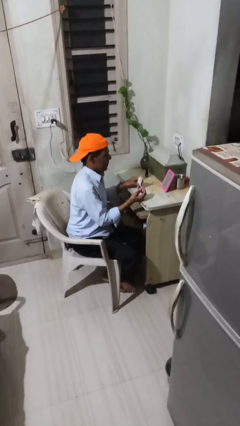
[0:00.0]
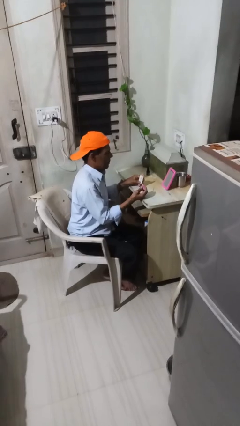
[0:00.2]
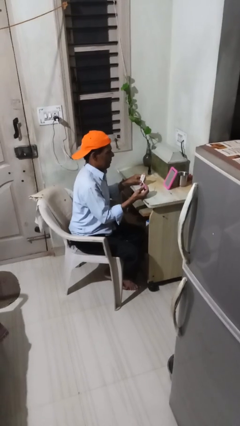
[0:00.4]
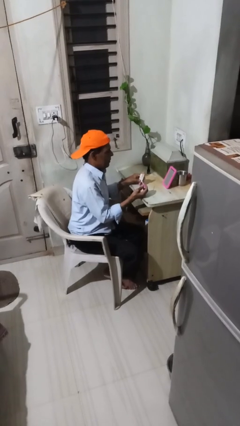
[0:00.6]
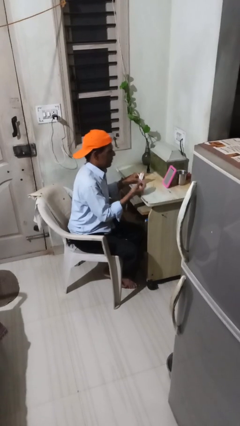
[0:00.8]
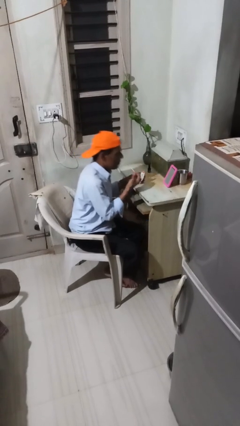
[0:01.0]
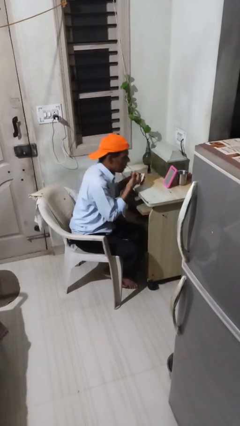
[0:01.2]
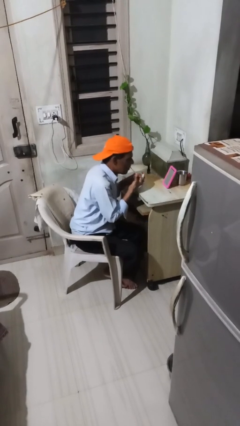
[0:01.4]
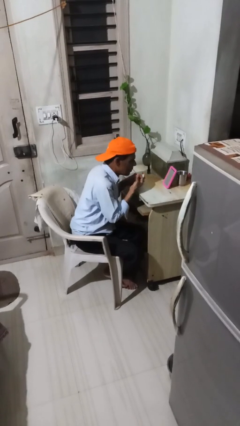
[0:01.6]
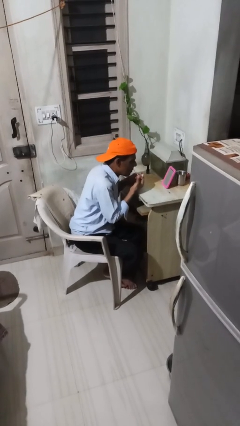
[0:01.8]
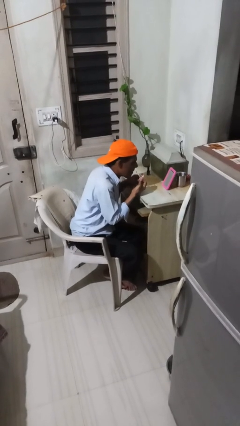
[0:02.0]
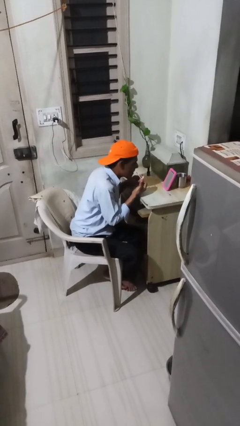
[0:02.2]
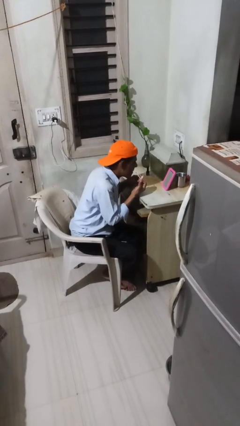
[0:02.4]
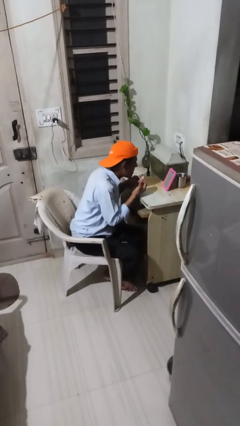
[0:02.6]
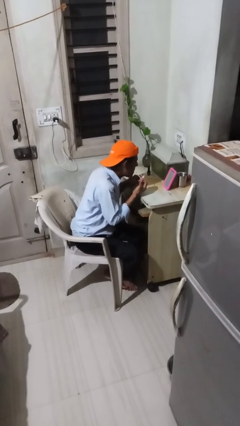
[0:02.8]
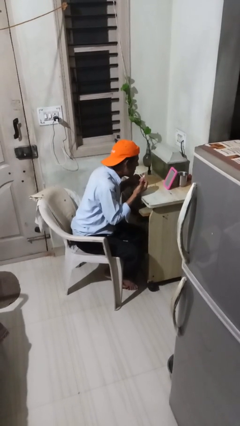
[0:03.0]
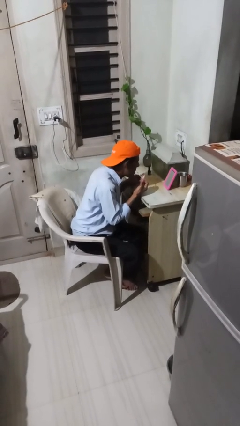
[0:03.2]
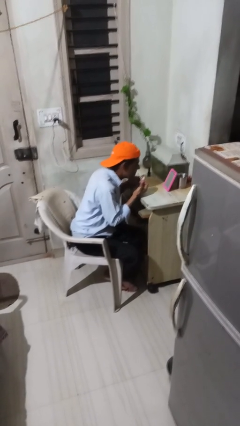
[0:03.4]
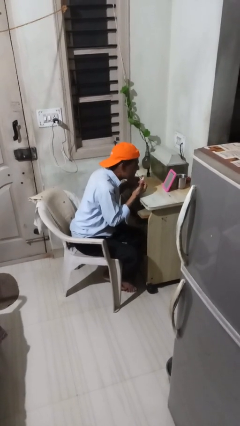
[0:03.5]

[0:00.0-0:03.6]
person applies lip makeup

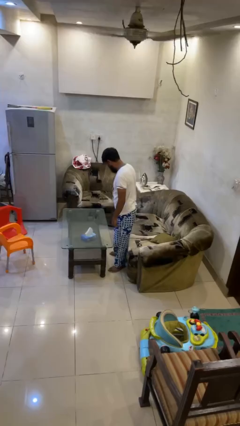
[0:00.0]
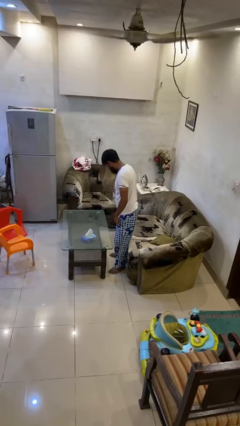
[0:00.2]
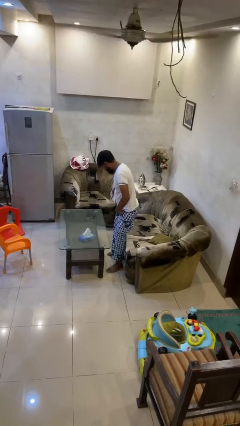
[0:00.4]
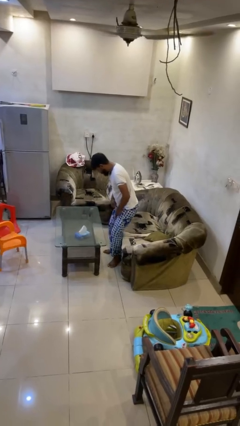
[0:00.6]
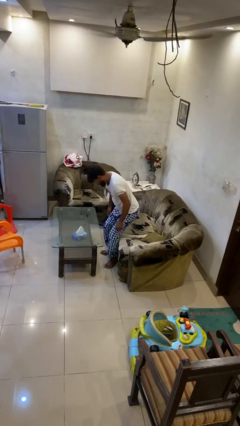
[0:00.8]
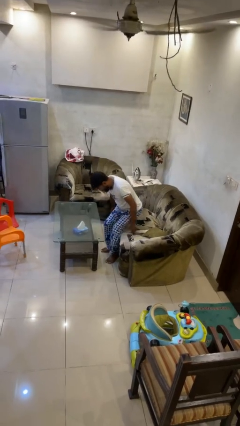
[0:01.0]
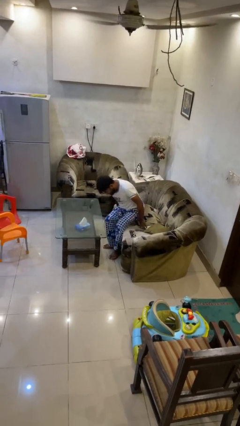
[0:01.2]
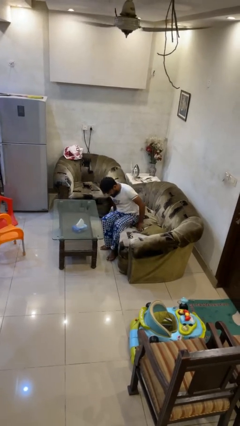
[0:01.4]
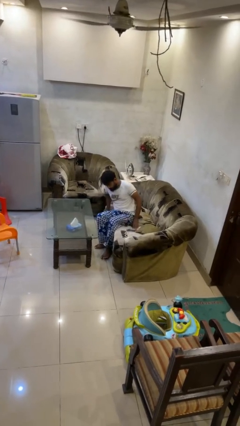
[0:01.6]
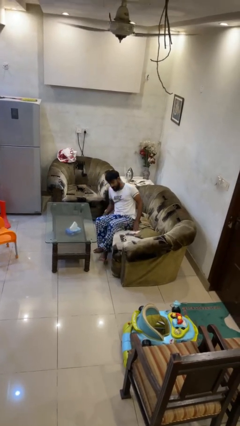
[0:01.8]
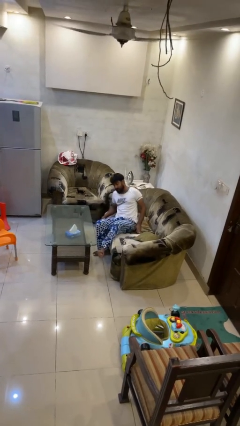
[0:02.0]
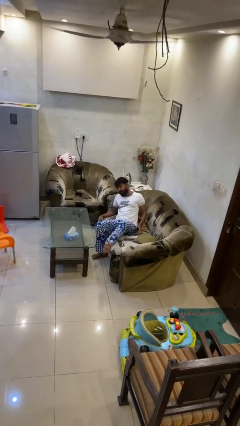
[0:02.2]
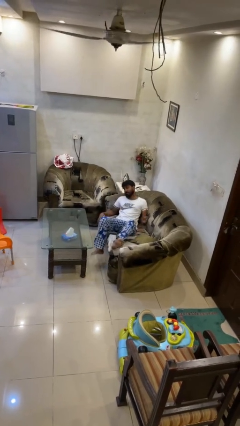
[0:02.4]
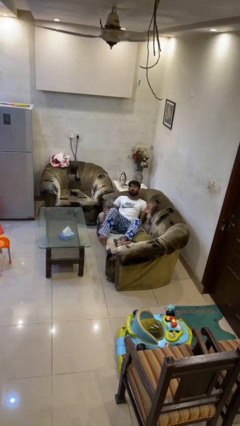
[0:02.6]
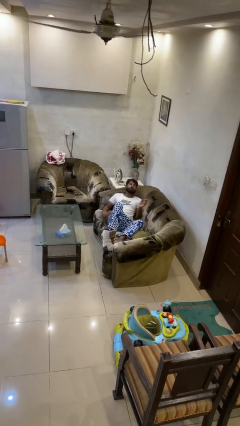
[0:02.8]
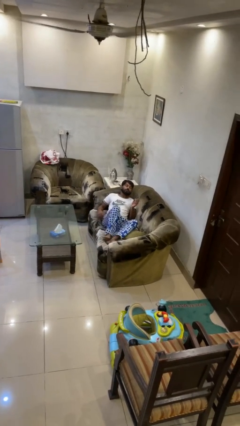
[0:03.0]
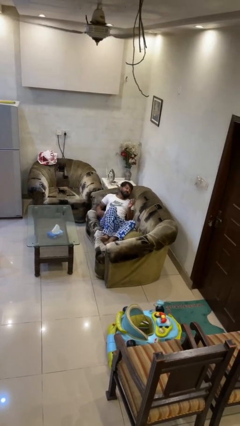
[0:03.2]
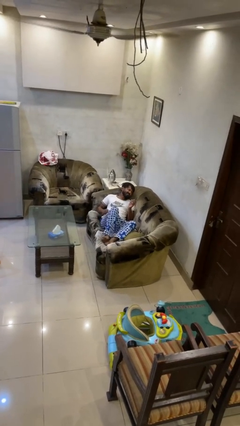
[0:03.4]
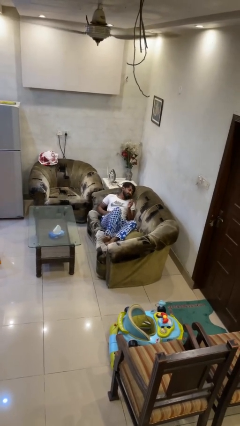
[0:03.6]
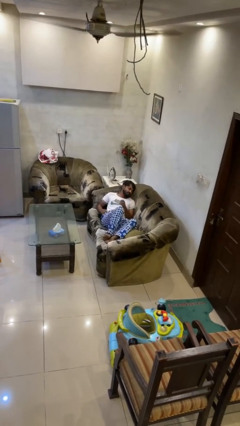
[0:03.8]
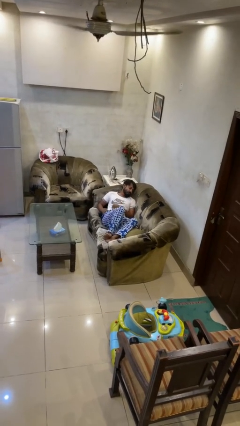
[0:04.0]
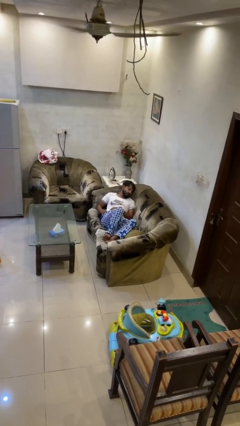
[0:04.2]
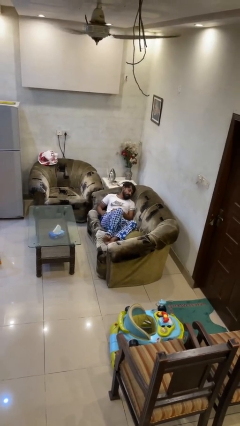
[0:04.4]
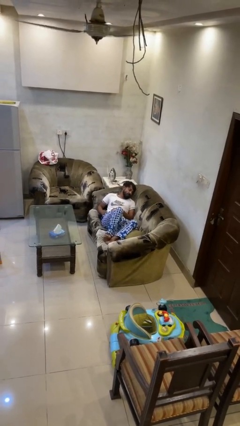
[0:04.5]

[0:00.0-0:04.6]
person lies down on couch

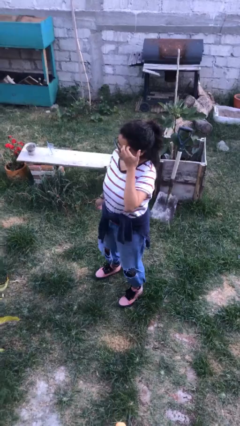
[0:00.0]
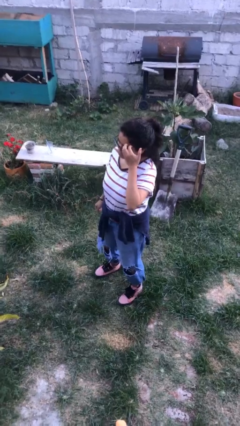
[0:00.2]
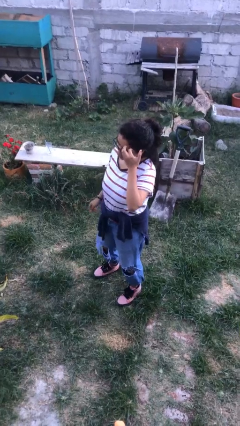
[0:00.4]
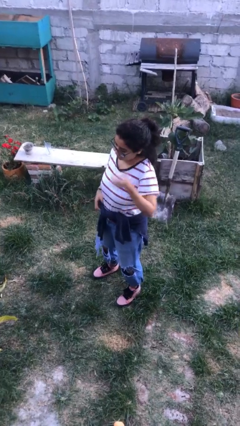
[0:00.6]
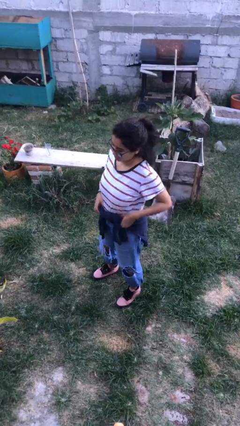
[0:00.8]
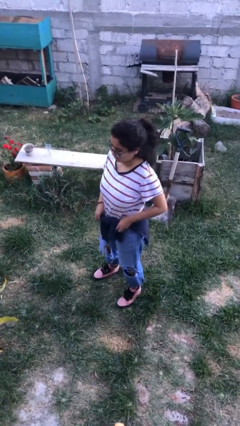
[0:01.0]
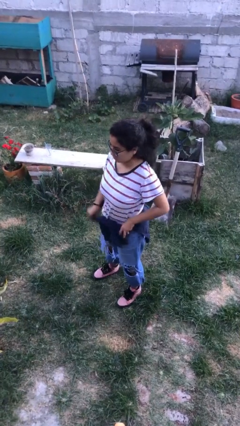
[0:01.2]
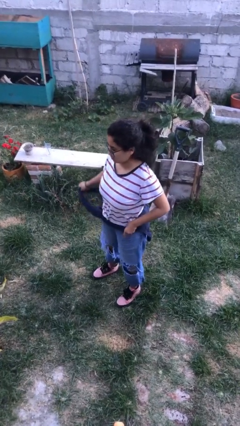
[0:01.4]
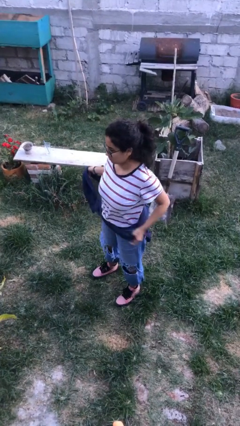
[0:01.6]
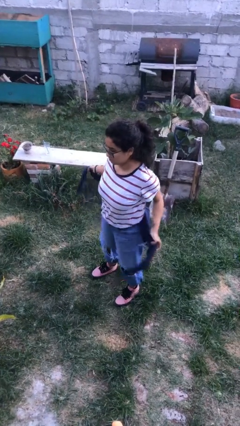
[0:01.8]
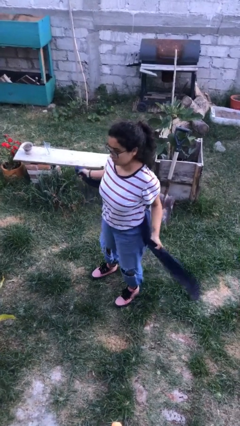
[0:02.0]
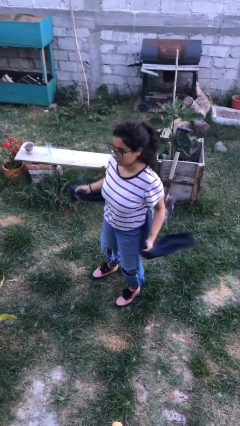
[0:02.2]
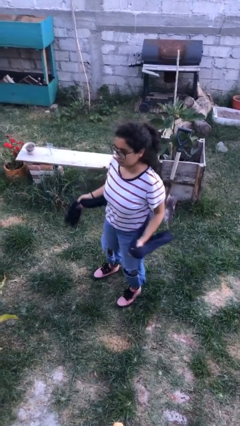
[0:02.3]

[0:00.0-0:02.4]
person unties jacket around waist

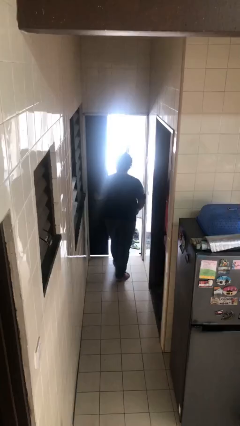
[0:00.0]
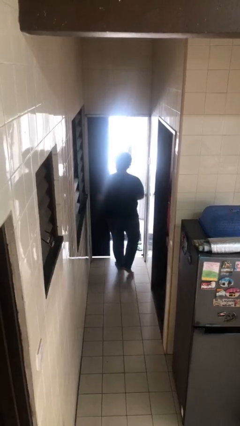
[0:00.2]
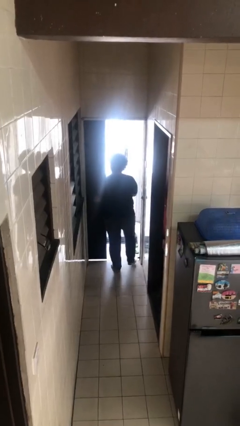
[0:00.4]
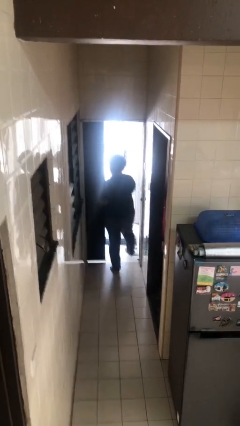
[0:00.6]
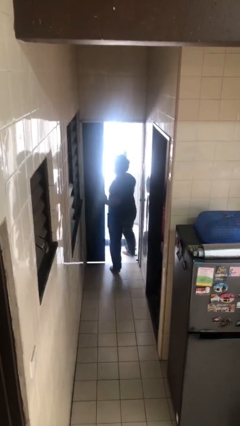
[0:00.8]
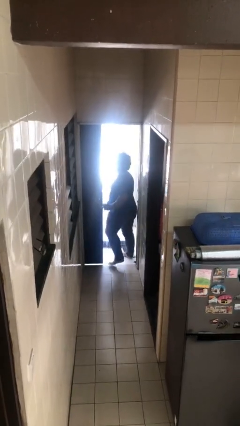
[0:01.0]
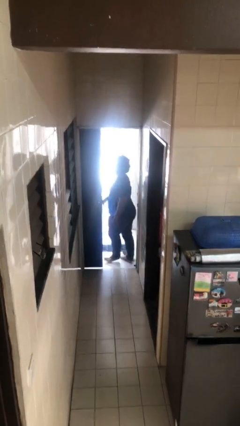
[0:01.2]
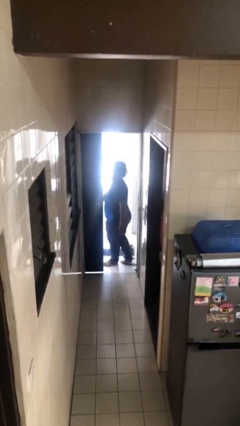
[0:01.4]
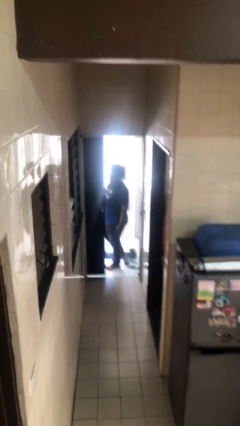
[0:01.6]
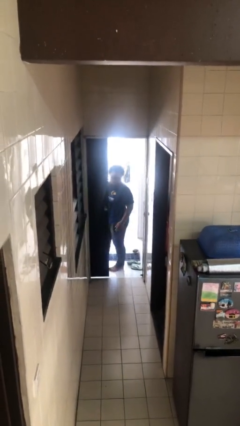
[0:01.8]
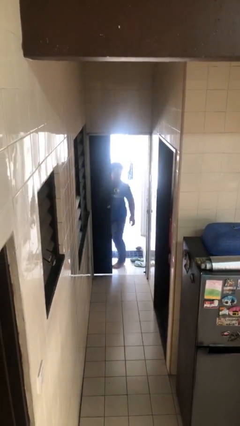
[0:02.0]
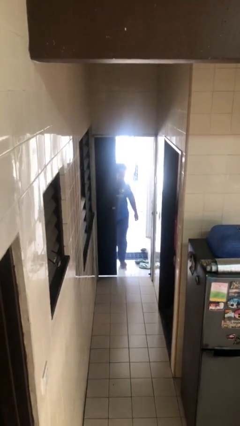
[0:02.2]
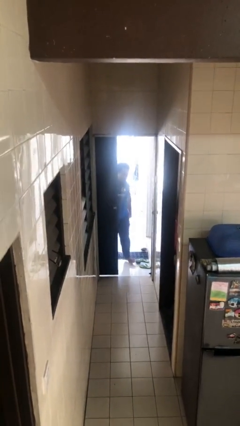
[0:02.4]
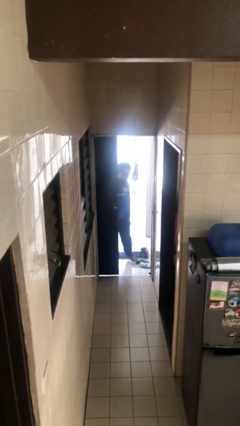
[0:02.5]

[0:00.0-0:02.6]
person exits scene through structure

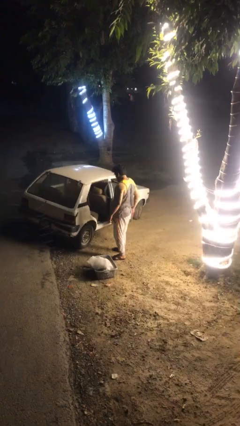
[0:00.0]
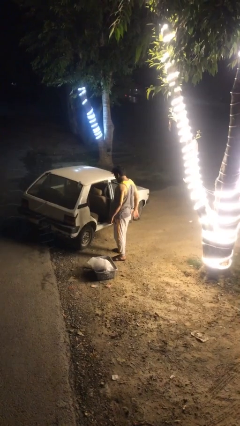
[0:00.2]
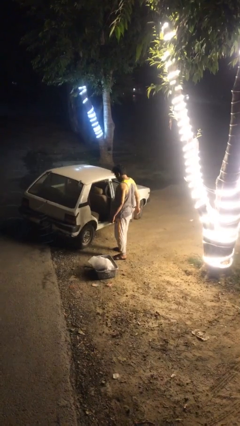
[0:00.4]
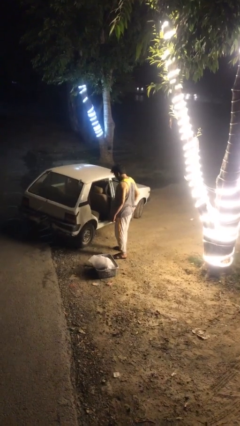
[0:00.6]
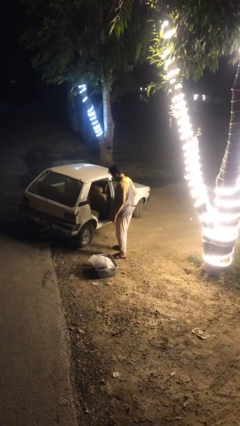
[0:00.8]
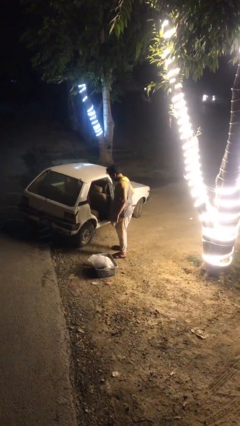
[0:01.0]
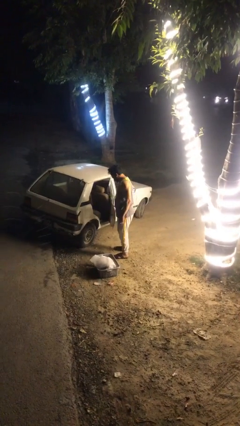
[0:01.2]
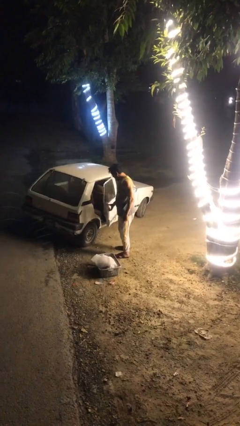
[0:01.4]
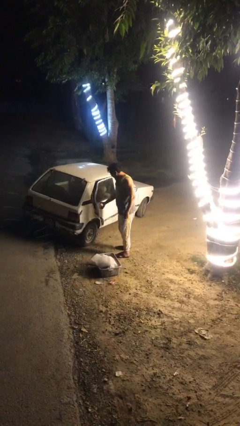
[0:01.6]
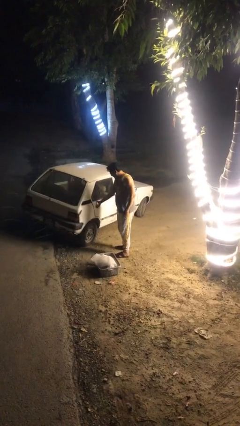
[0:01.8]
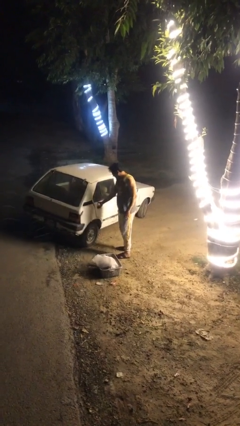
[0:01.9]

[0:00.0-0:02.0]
person closes car door

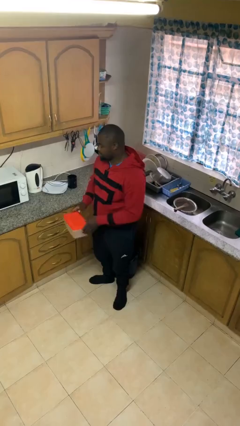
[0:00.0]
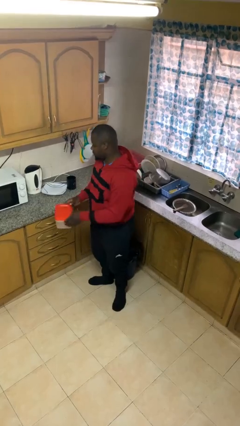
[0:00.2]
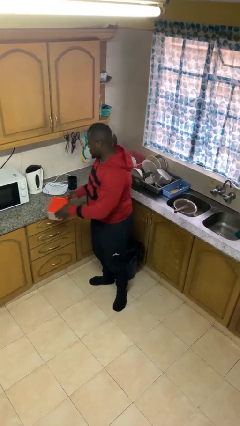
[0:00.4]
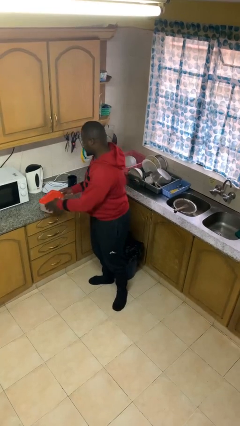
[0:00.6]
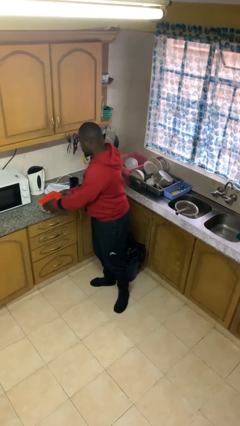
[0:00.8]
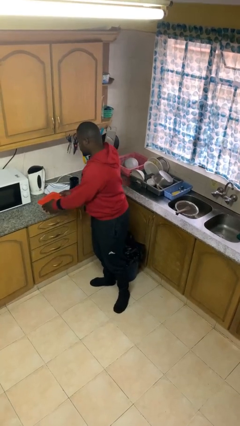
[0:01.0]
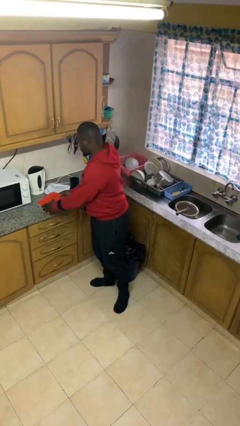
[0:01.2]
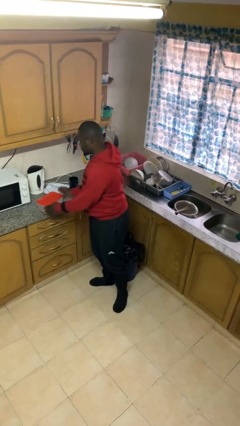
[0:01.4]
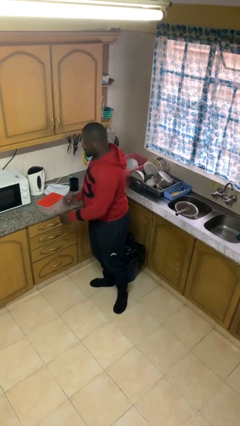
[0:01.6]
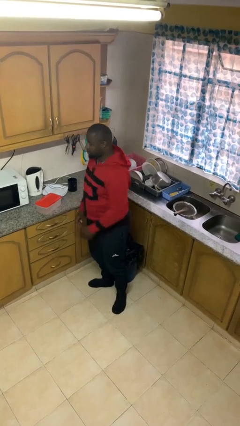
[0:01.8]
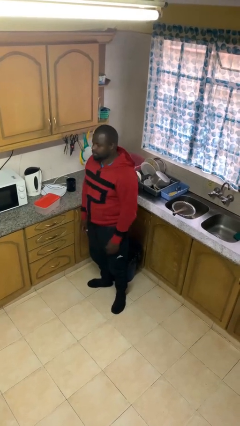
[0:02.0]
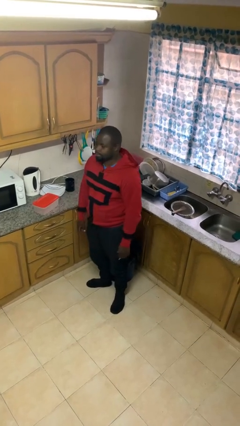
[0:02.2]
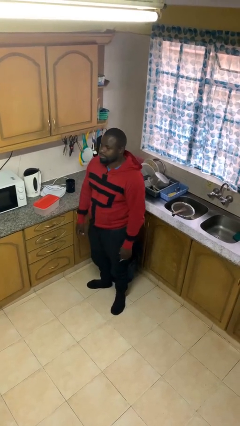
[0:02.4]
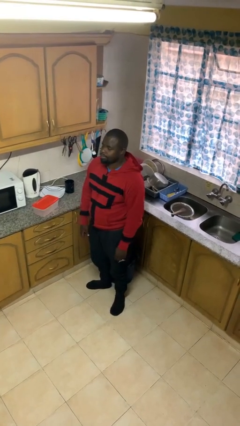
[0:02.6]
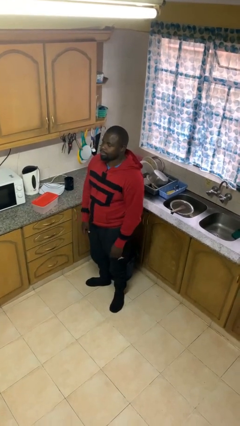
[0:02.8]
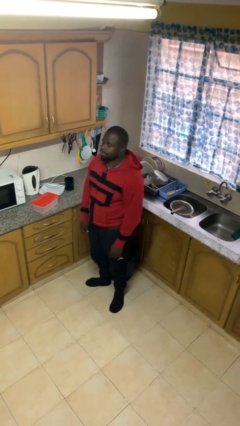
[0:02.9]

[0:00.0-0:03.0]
person puts down object on countertop
